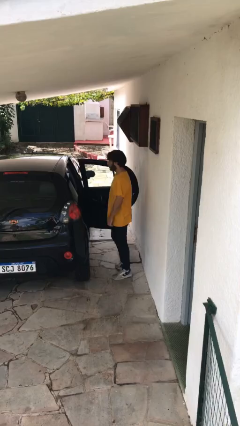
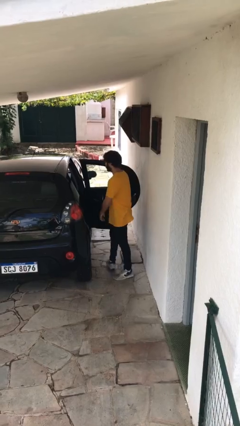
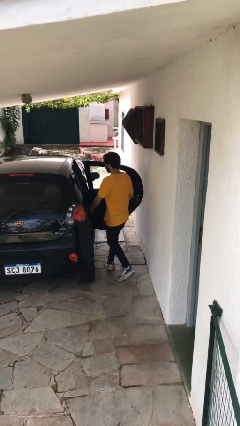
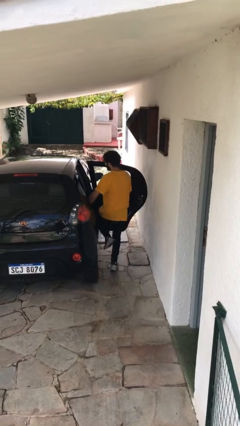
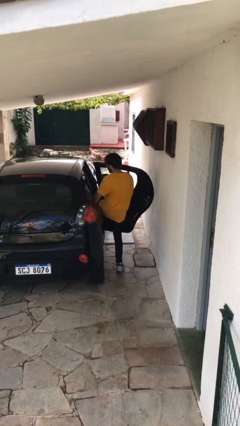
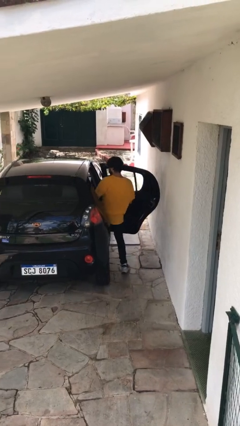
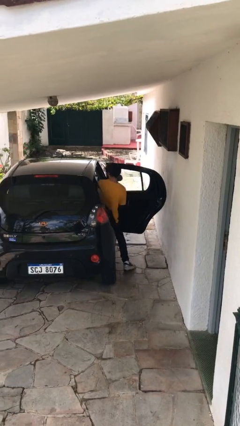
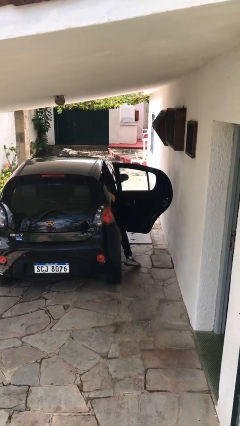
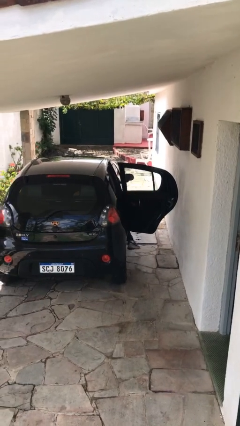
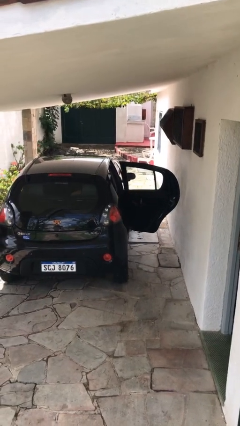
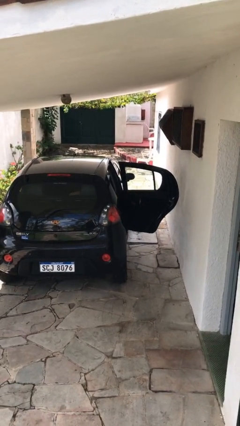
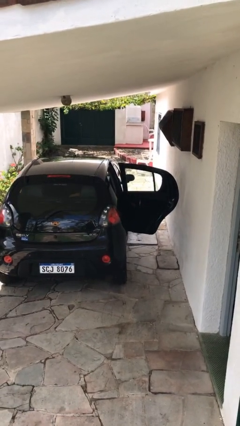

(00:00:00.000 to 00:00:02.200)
person enters car

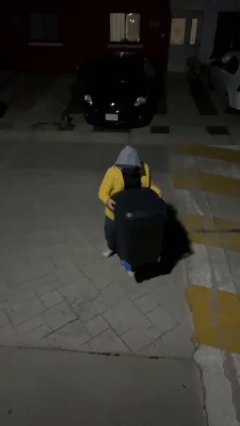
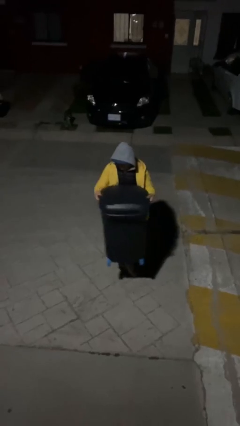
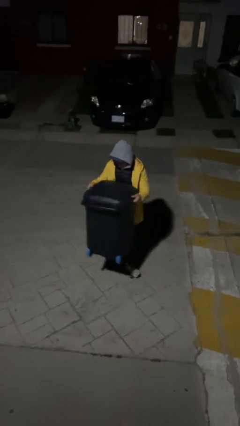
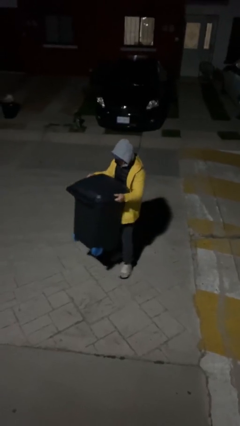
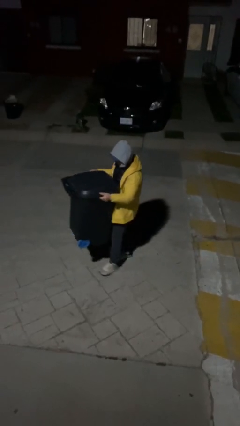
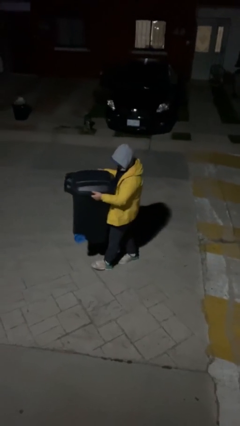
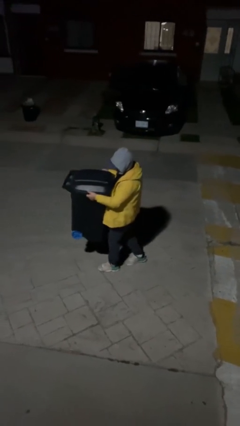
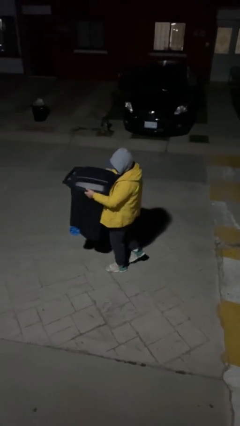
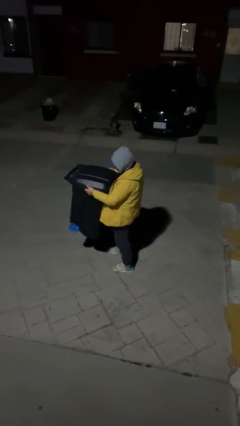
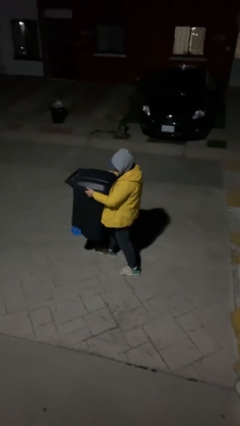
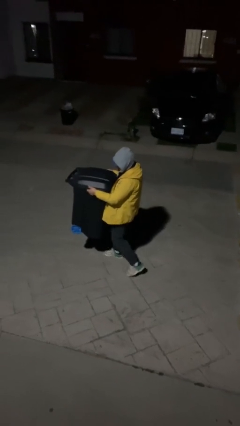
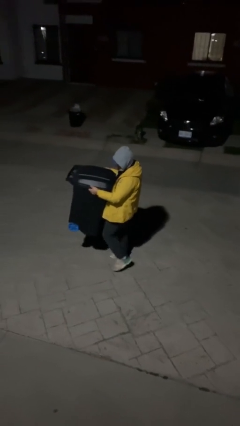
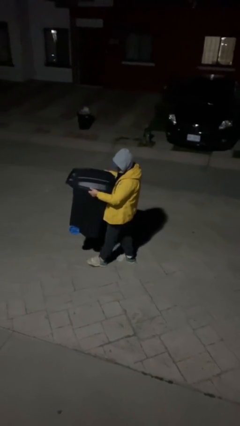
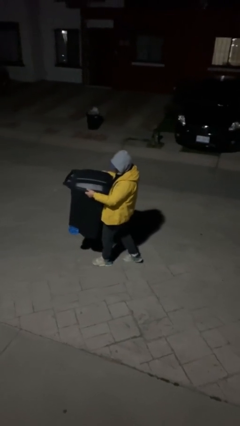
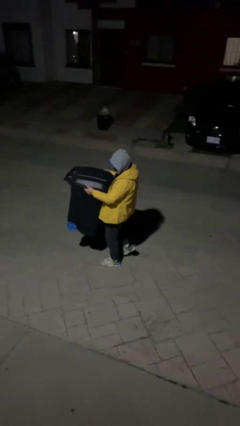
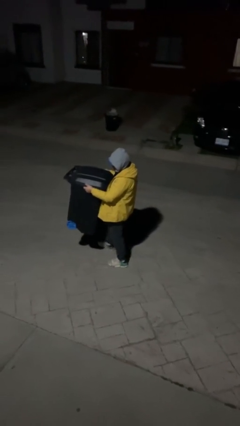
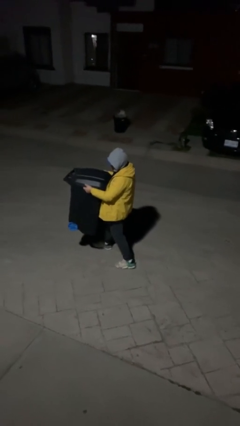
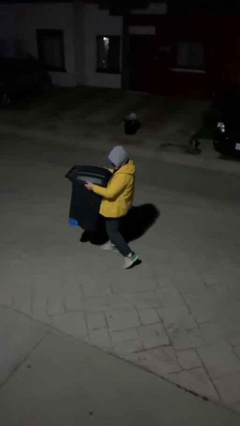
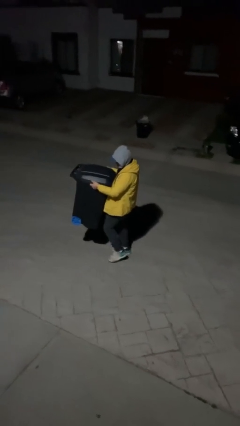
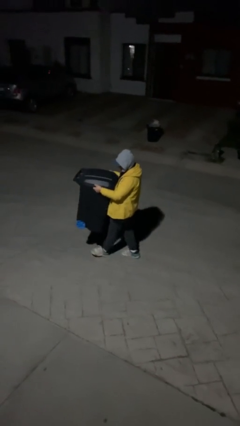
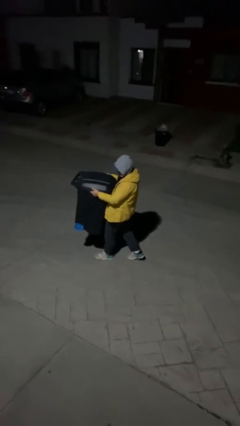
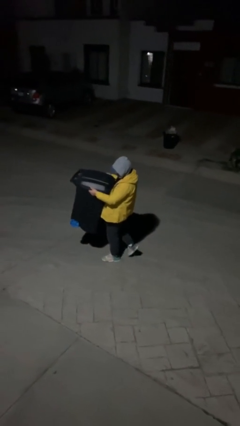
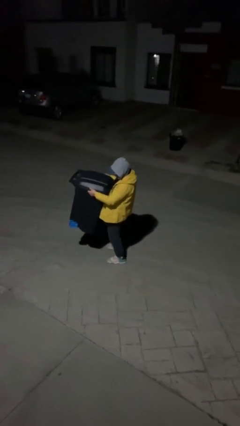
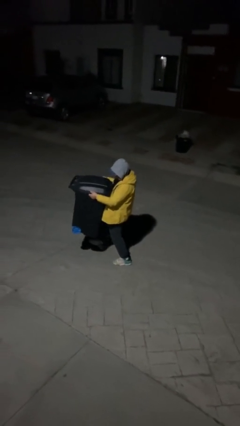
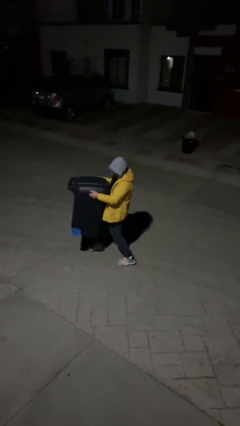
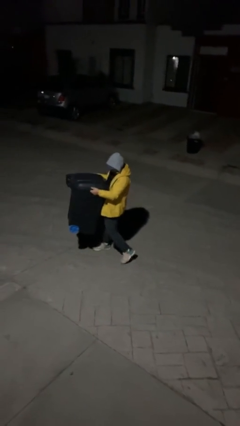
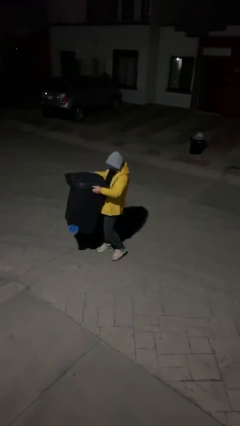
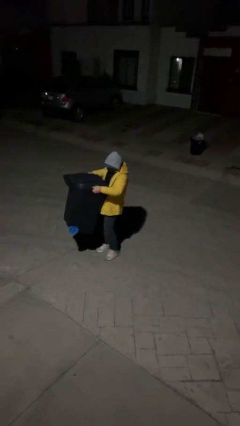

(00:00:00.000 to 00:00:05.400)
person carries heavy object

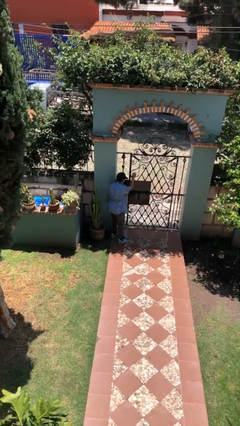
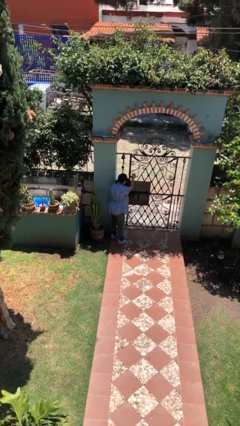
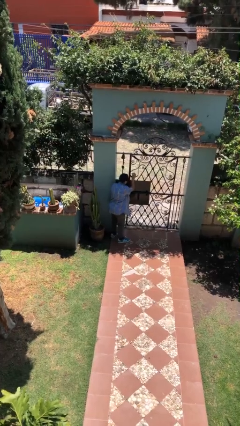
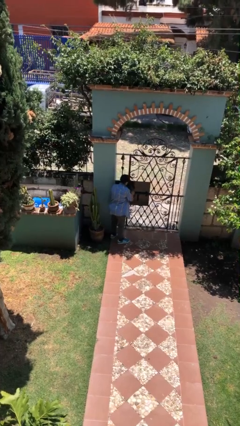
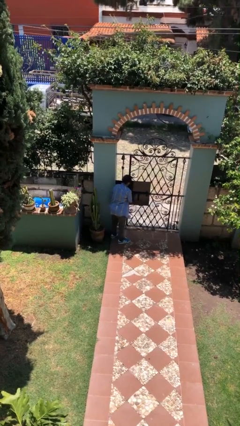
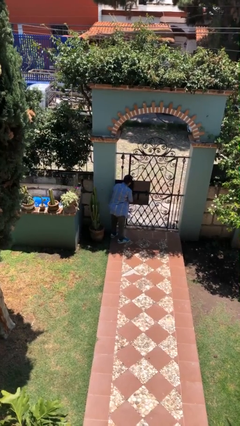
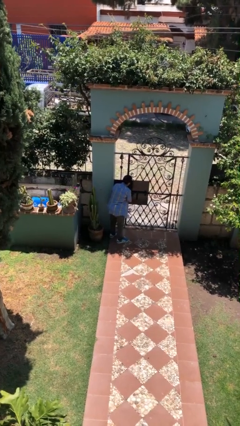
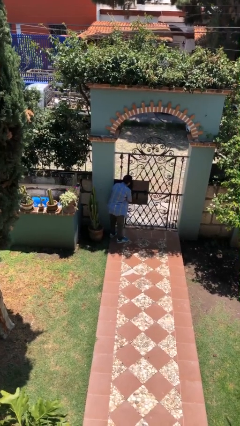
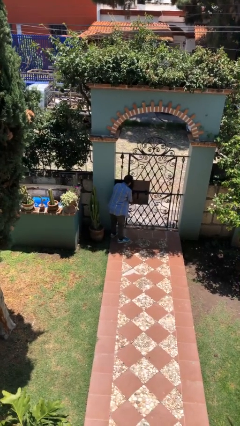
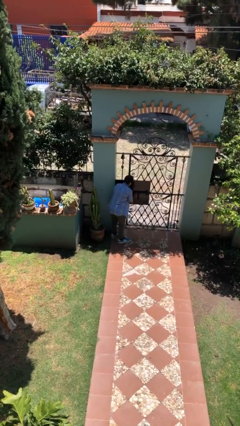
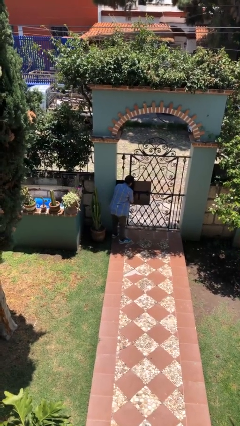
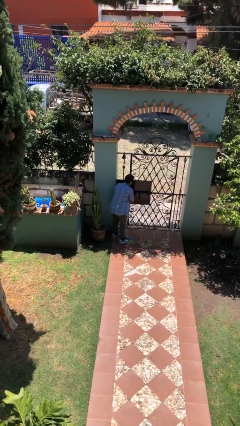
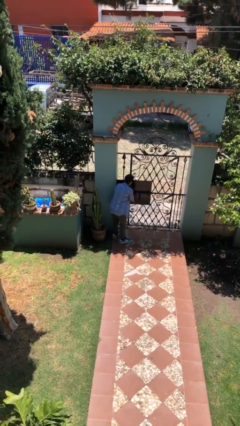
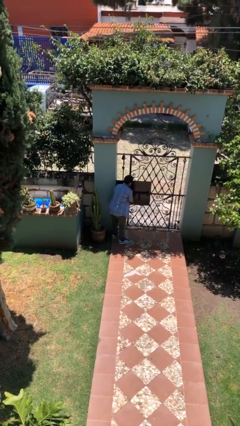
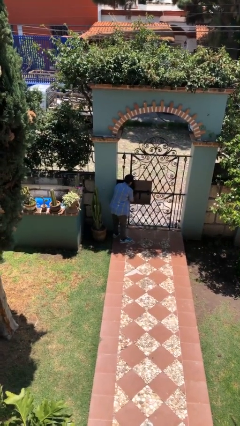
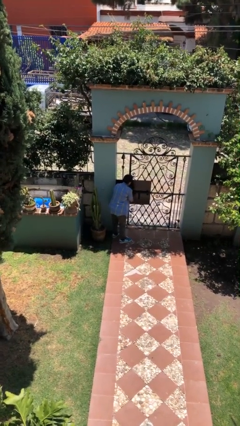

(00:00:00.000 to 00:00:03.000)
person locks door with keys

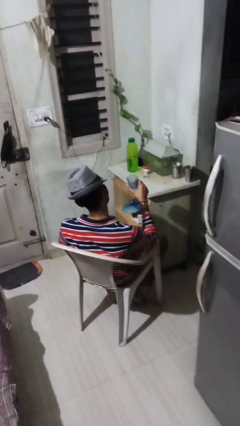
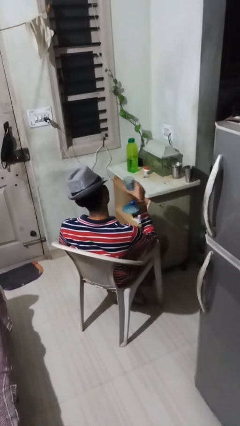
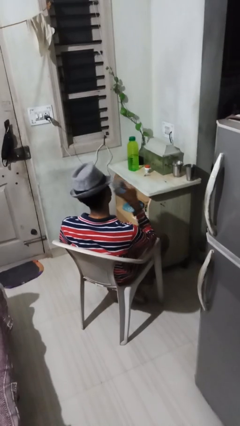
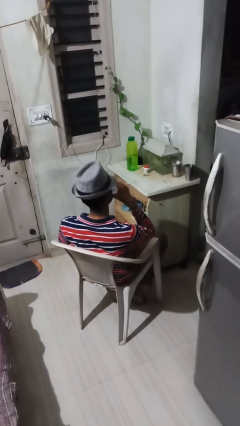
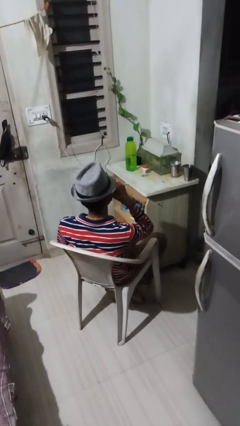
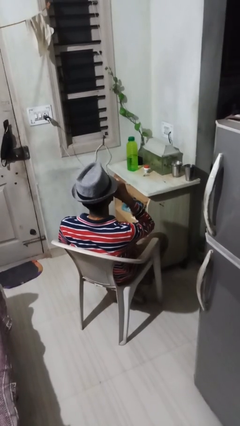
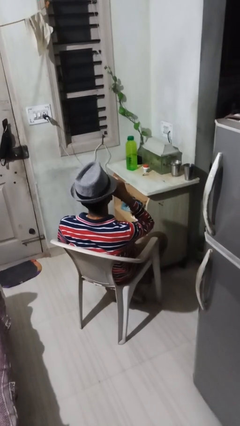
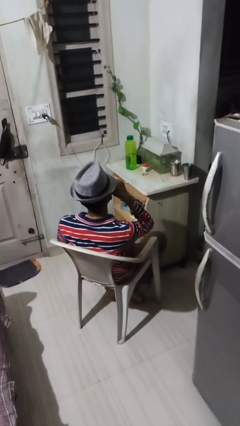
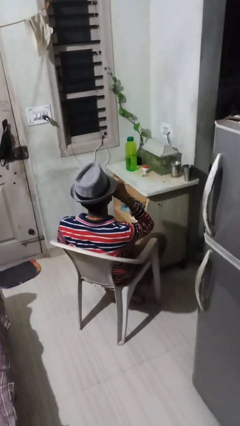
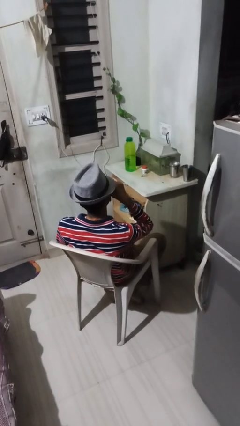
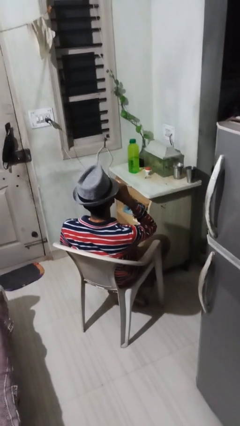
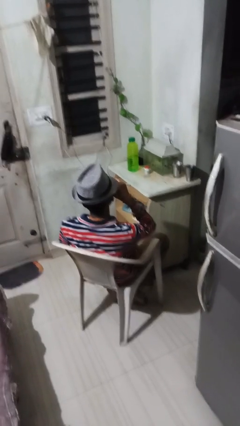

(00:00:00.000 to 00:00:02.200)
person drinks from shotglass

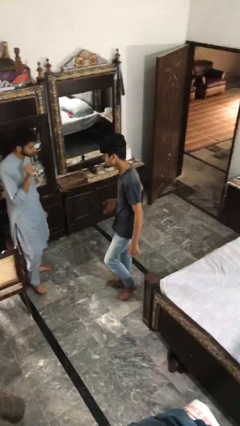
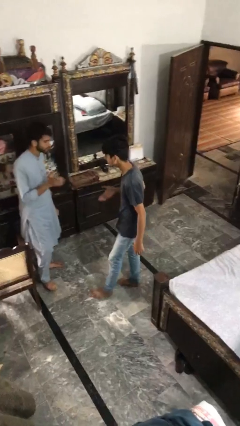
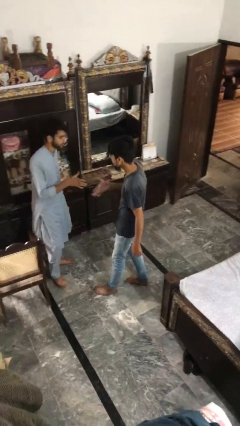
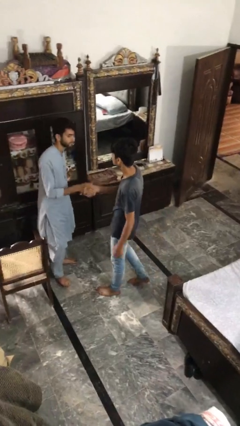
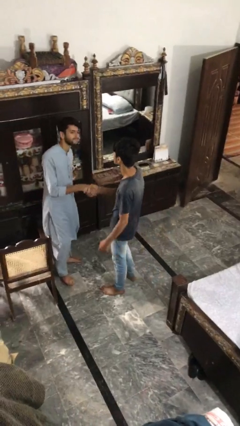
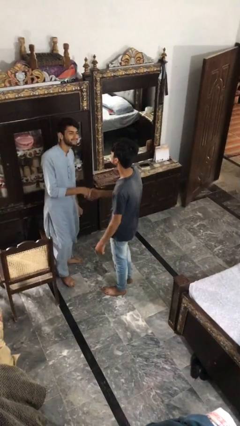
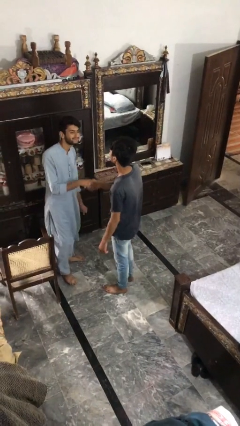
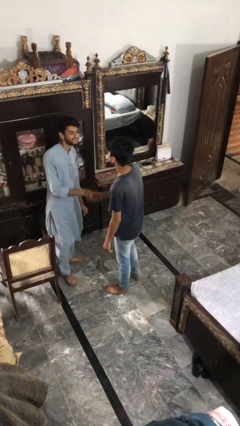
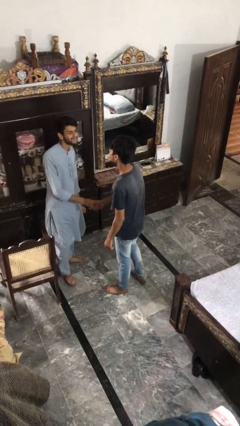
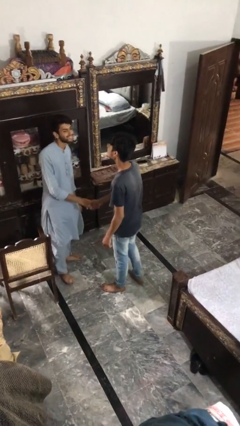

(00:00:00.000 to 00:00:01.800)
person shakes hand

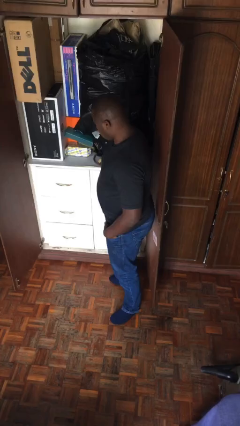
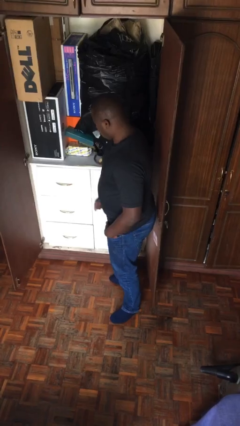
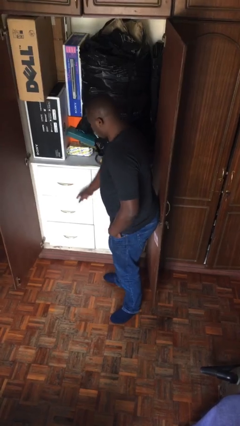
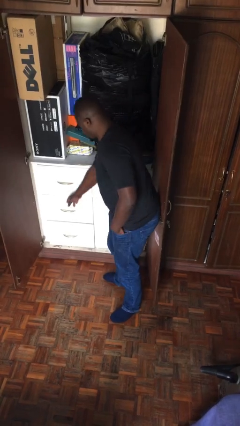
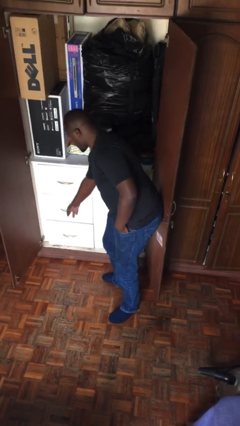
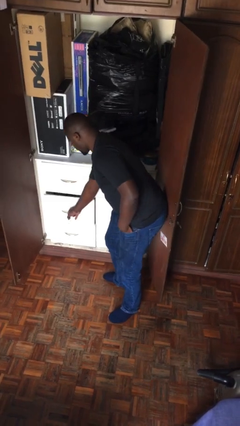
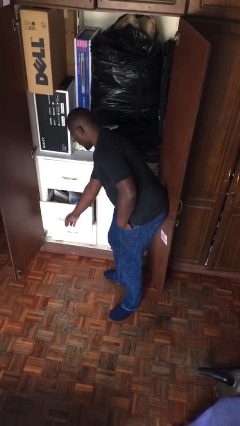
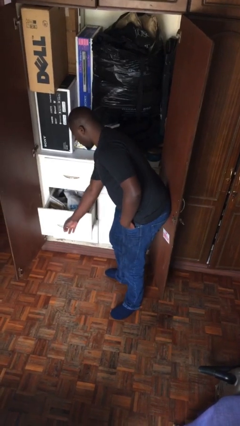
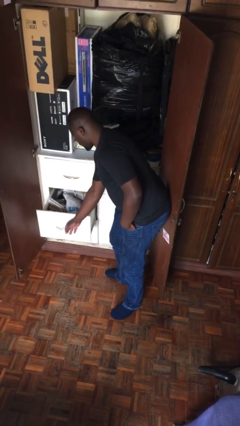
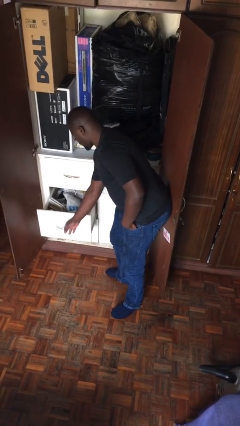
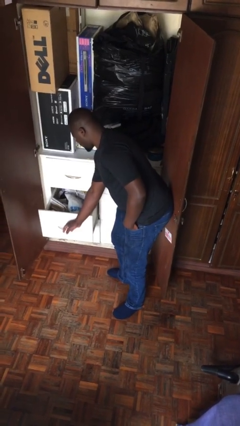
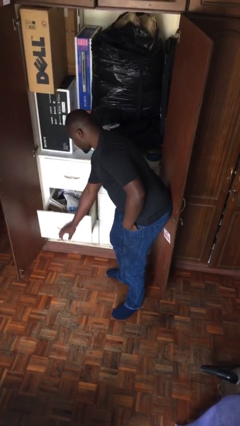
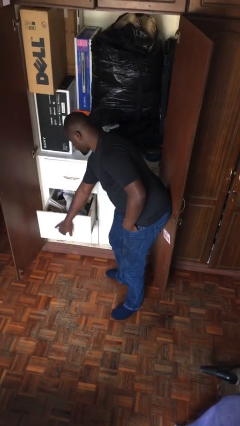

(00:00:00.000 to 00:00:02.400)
person opens dresser drawer

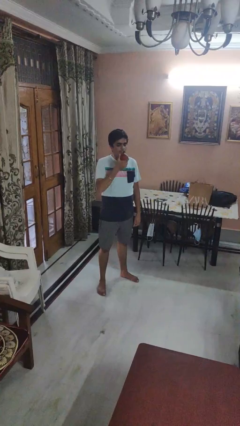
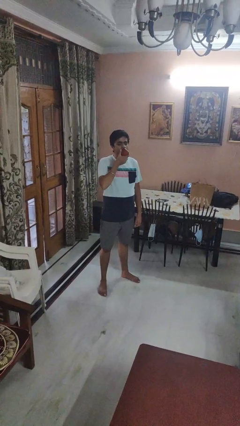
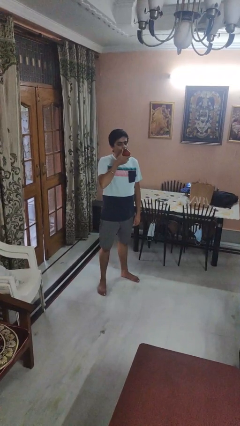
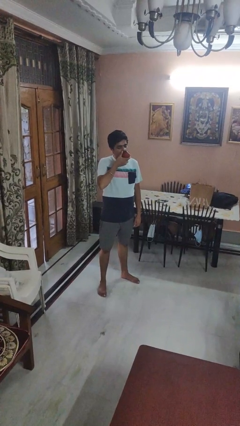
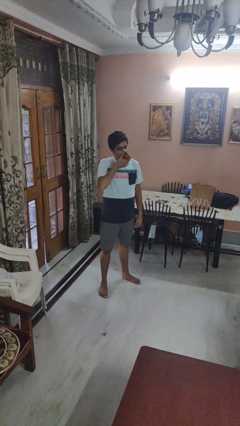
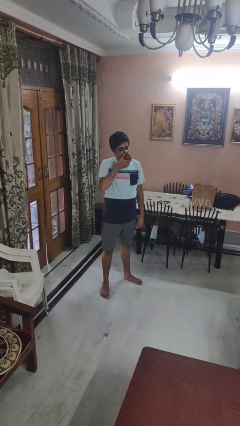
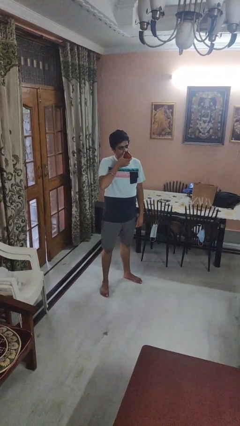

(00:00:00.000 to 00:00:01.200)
person eats apple
